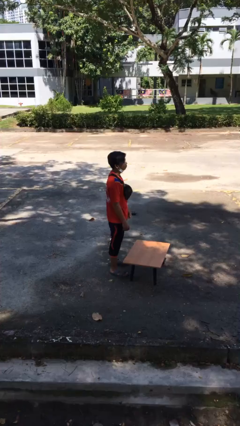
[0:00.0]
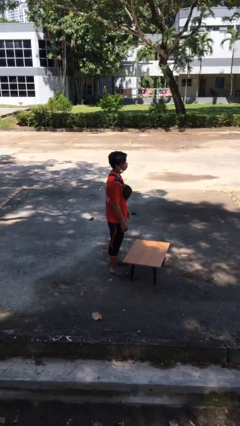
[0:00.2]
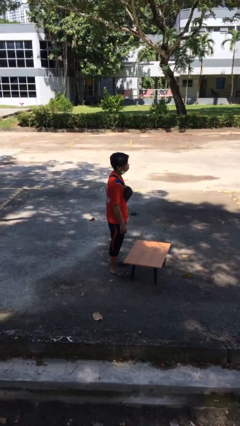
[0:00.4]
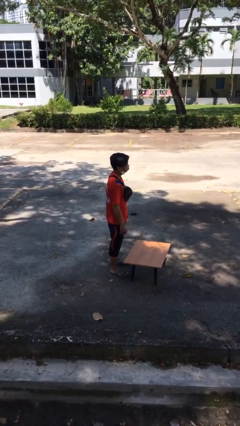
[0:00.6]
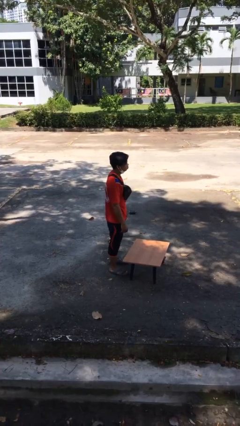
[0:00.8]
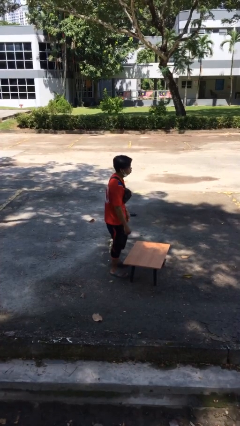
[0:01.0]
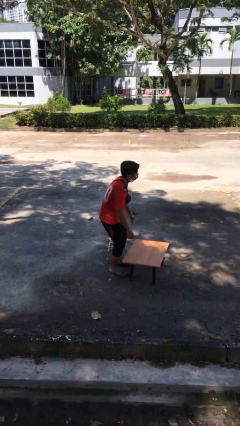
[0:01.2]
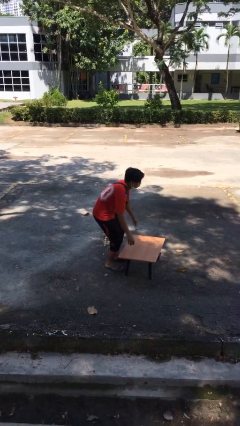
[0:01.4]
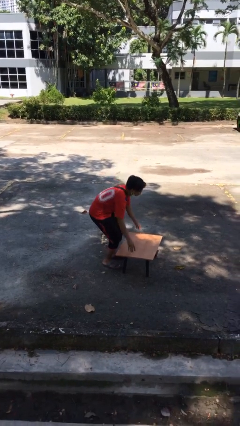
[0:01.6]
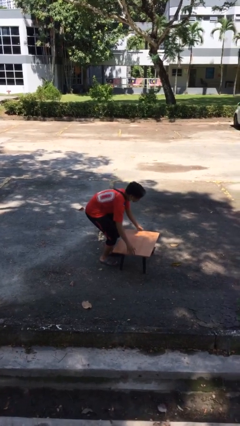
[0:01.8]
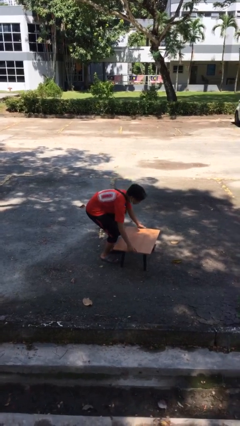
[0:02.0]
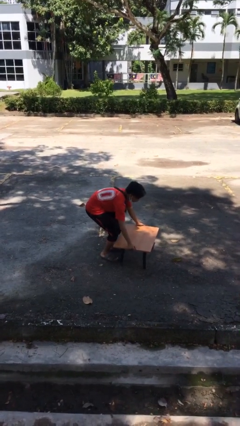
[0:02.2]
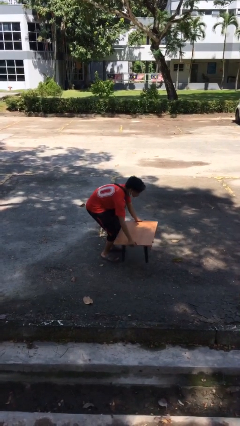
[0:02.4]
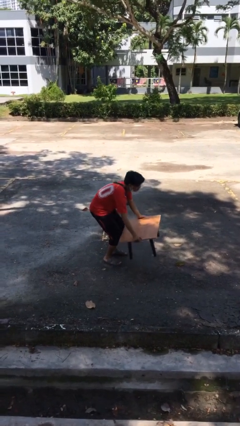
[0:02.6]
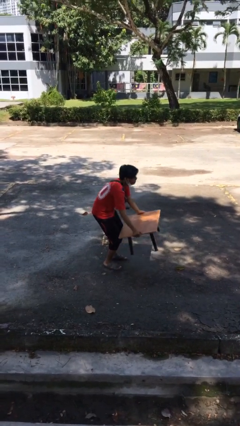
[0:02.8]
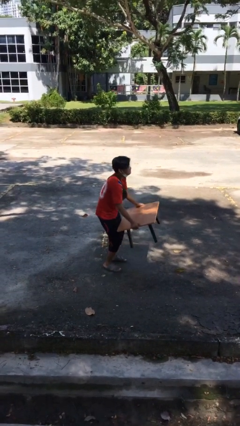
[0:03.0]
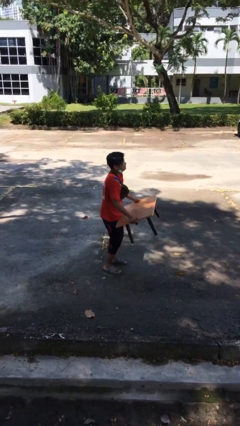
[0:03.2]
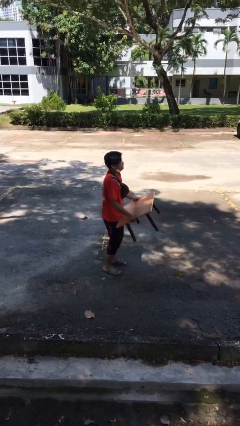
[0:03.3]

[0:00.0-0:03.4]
person picks up object from floor

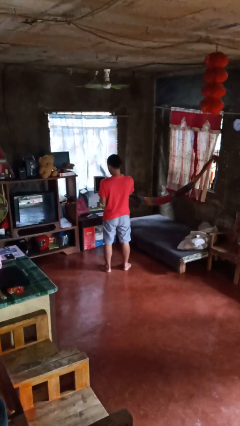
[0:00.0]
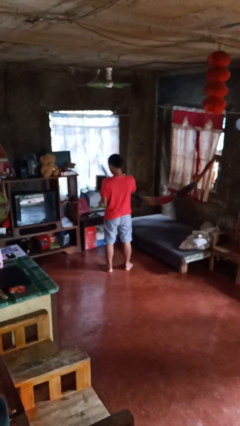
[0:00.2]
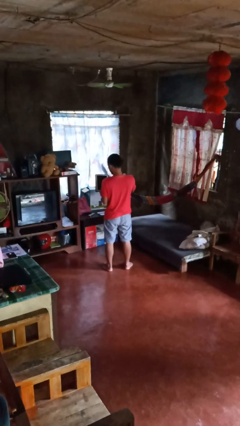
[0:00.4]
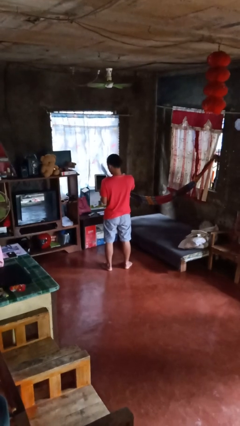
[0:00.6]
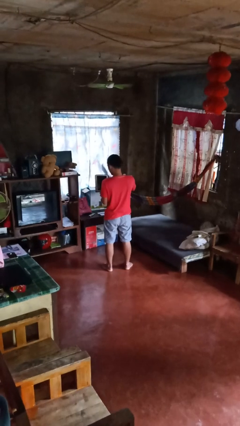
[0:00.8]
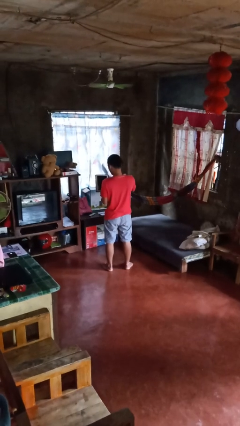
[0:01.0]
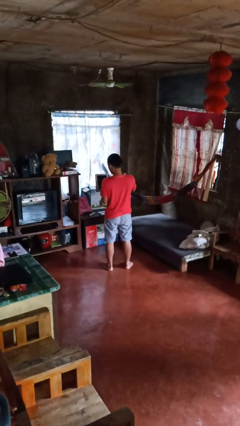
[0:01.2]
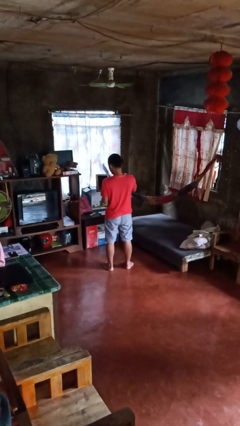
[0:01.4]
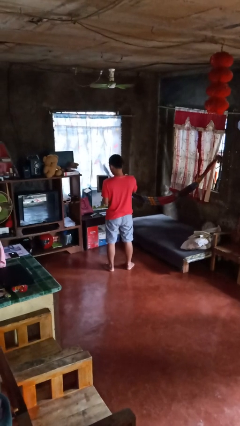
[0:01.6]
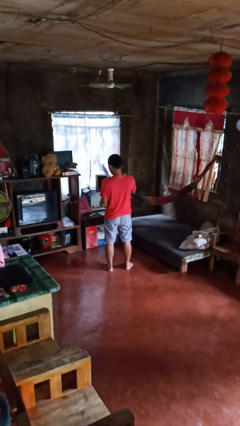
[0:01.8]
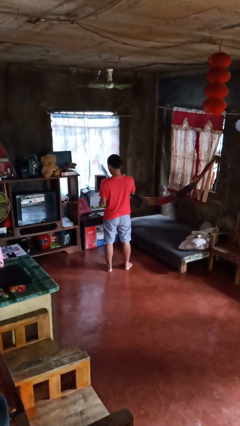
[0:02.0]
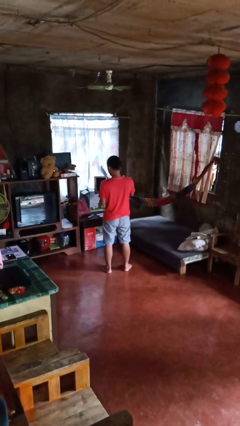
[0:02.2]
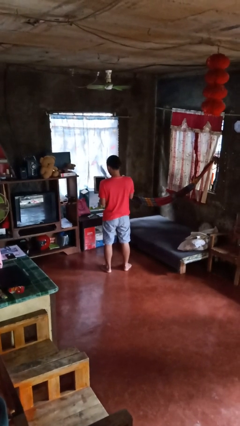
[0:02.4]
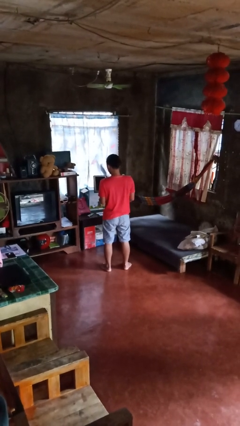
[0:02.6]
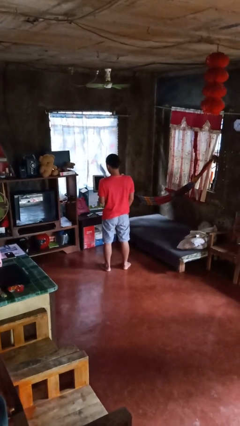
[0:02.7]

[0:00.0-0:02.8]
person interacts with tablet

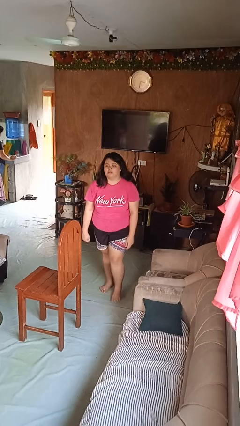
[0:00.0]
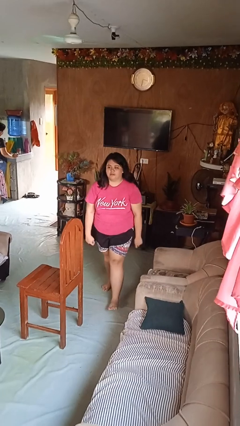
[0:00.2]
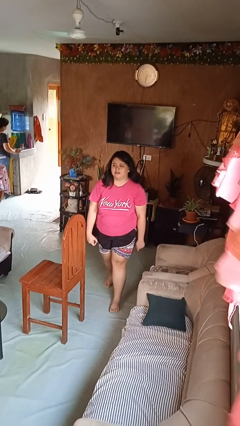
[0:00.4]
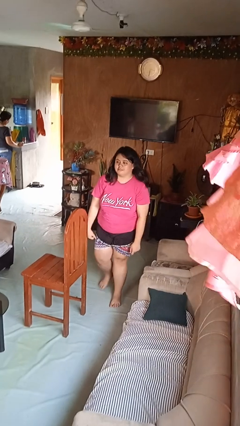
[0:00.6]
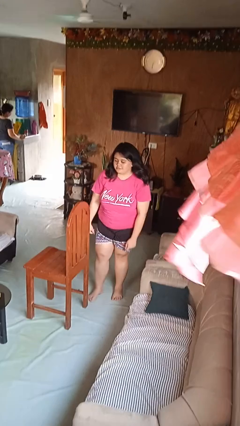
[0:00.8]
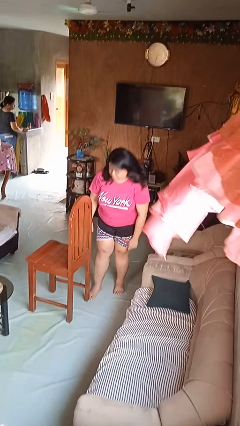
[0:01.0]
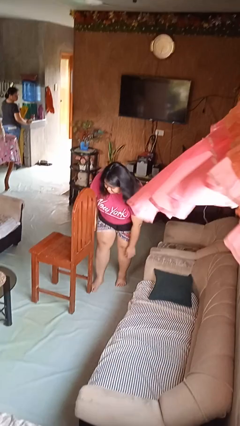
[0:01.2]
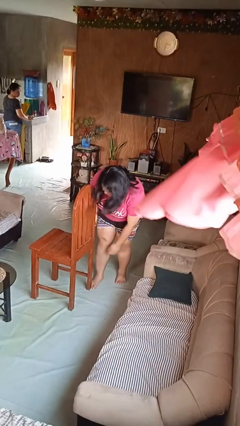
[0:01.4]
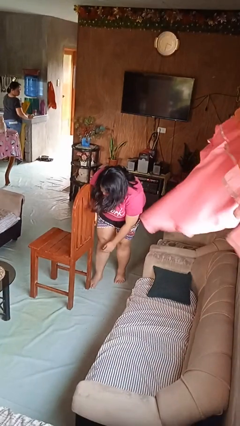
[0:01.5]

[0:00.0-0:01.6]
person stubs toe

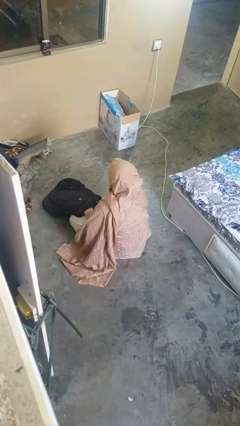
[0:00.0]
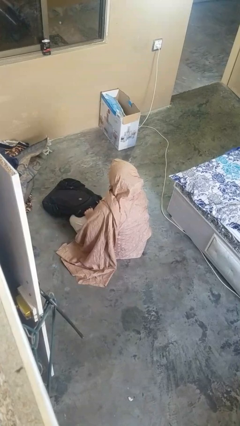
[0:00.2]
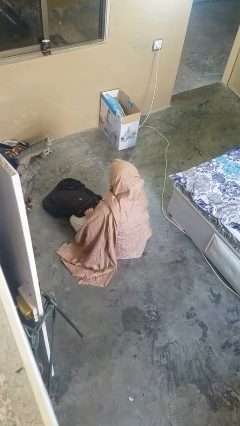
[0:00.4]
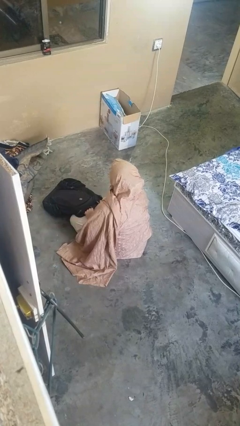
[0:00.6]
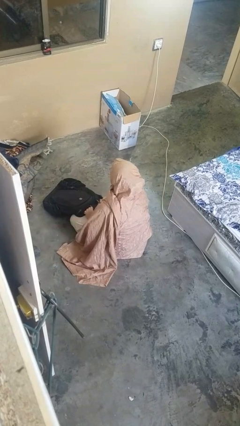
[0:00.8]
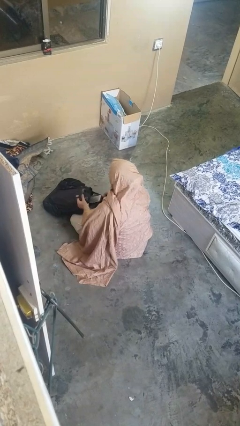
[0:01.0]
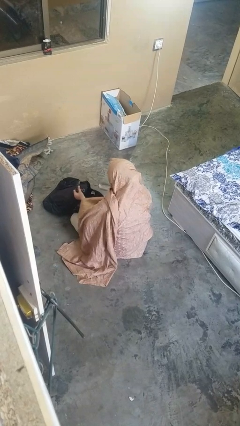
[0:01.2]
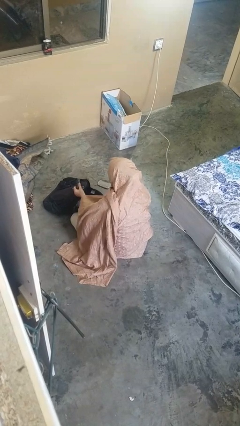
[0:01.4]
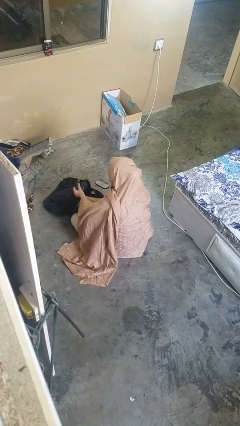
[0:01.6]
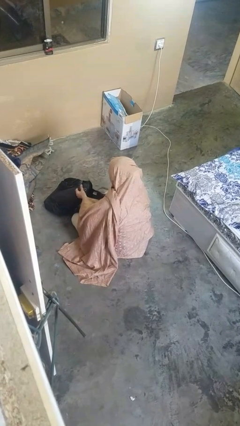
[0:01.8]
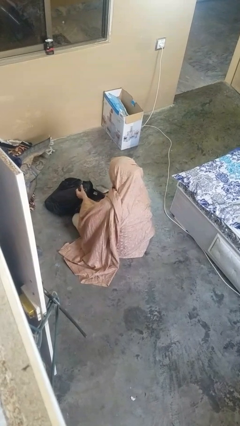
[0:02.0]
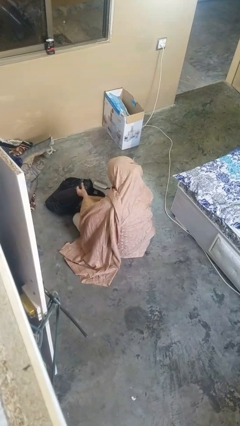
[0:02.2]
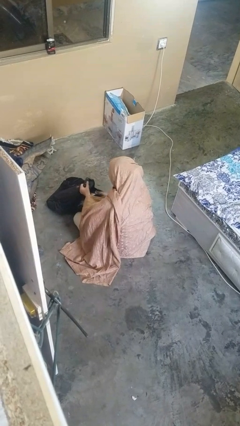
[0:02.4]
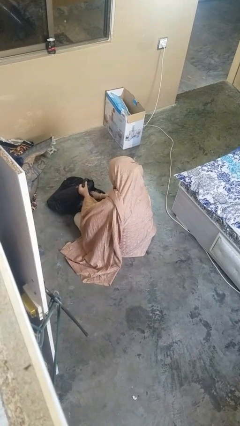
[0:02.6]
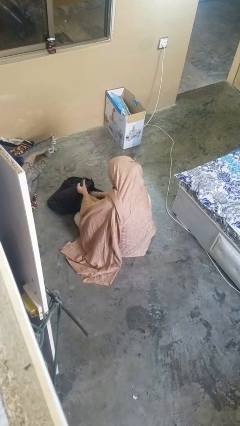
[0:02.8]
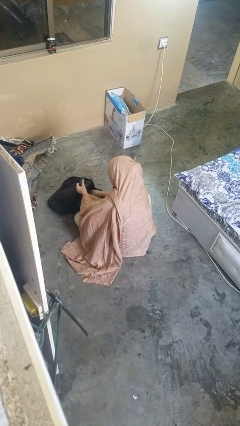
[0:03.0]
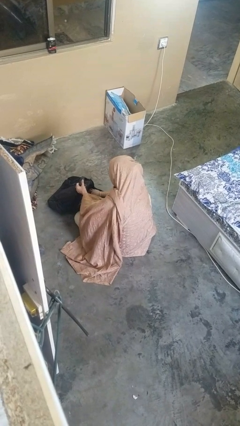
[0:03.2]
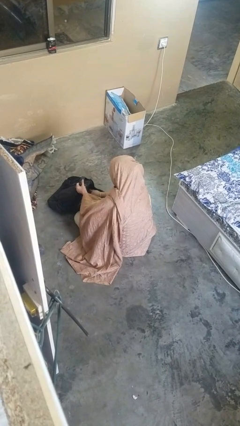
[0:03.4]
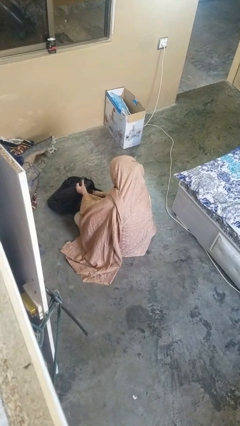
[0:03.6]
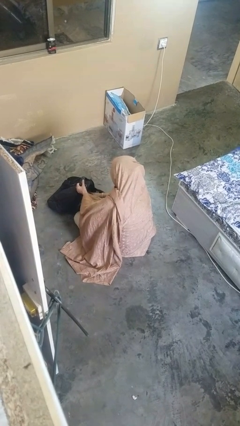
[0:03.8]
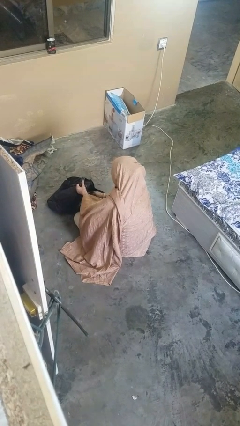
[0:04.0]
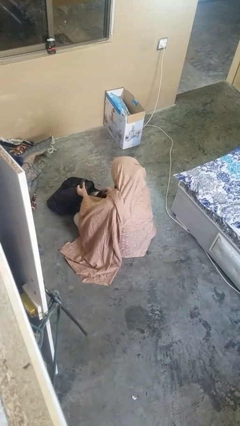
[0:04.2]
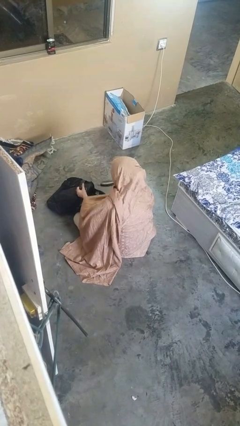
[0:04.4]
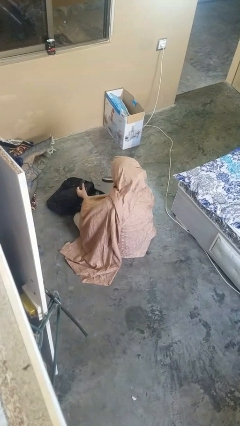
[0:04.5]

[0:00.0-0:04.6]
person searches in backpack

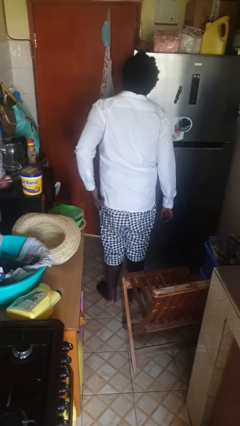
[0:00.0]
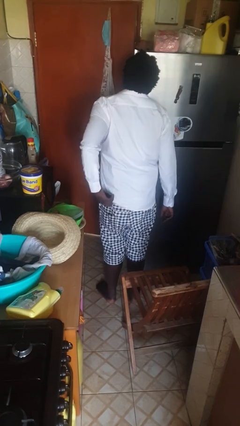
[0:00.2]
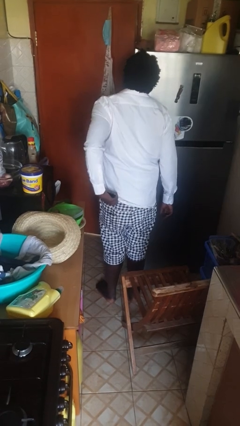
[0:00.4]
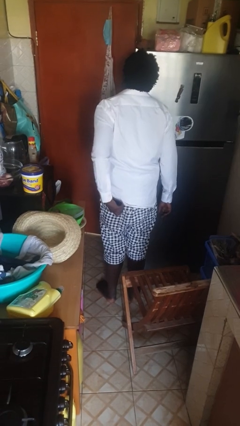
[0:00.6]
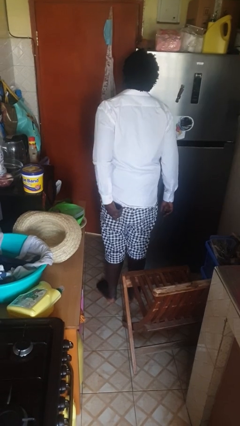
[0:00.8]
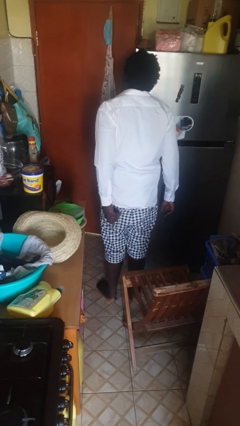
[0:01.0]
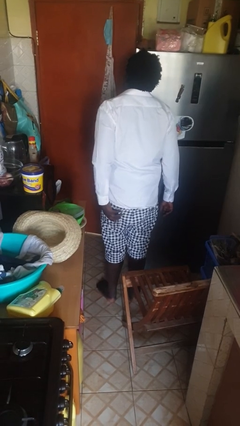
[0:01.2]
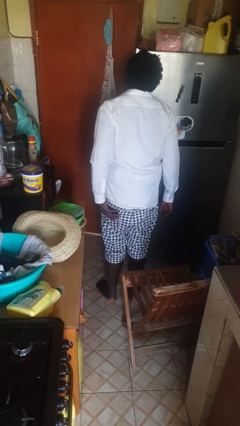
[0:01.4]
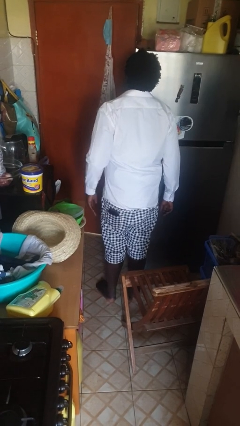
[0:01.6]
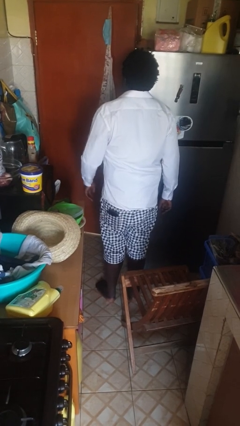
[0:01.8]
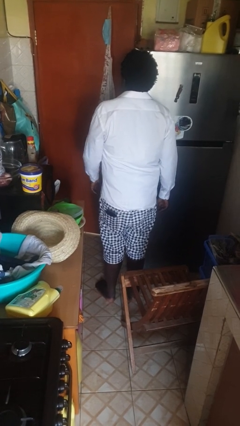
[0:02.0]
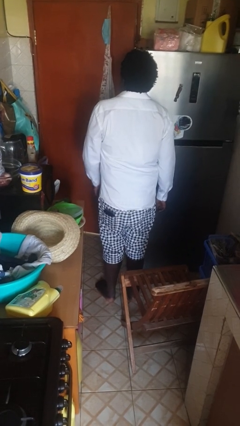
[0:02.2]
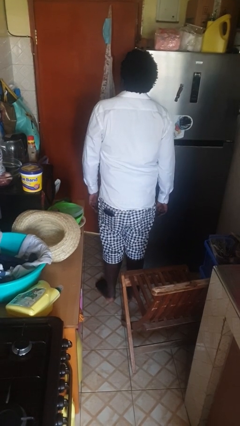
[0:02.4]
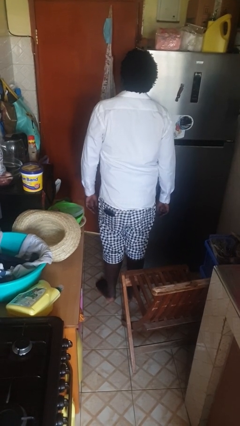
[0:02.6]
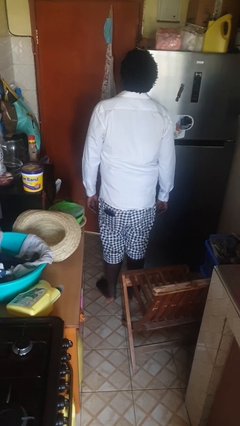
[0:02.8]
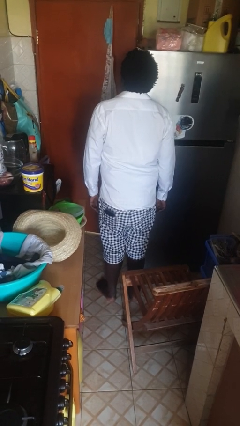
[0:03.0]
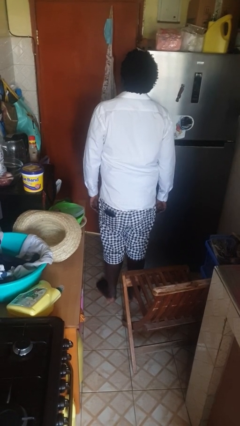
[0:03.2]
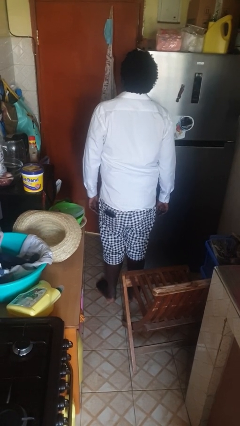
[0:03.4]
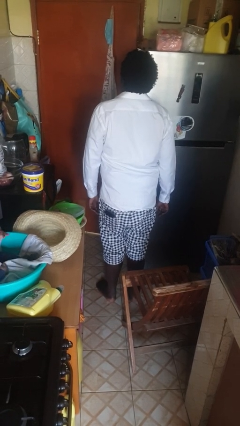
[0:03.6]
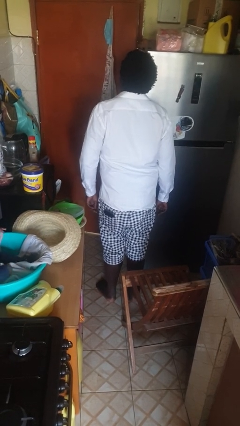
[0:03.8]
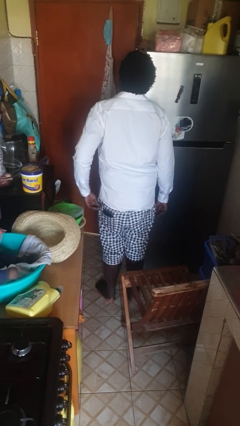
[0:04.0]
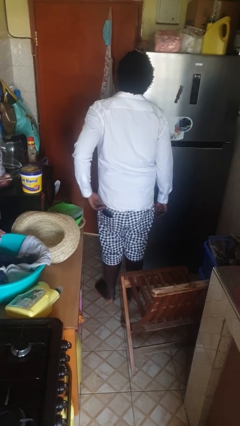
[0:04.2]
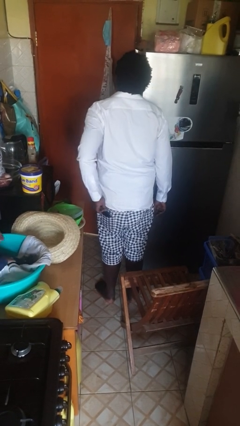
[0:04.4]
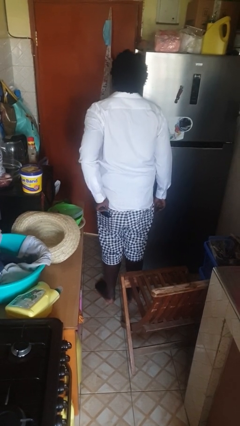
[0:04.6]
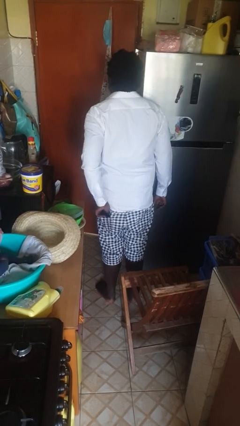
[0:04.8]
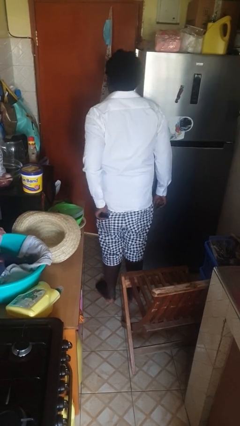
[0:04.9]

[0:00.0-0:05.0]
person puts phone into pocket
